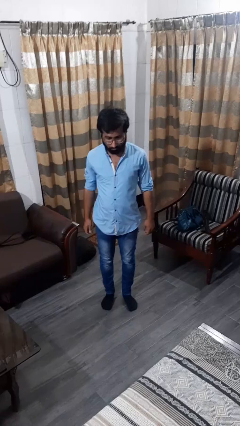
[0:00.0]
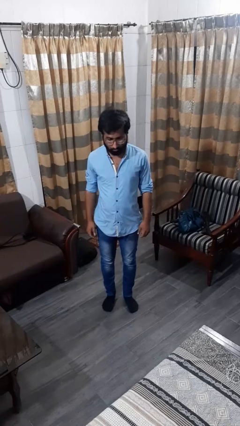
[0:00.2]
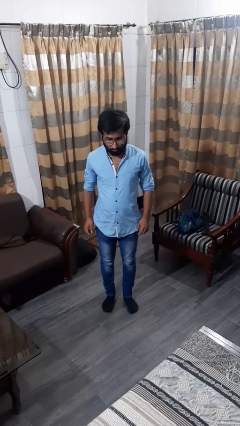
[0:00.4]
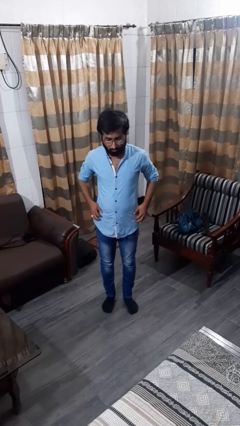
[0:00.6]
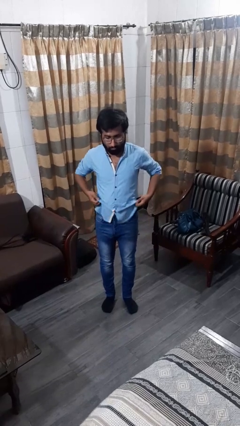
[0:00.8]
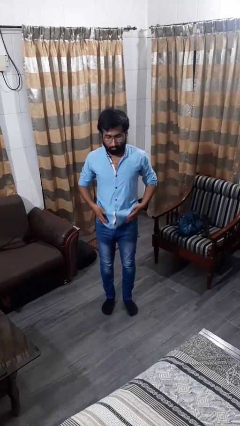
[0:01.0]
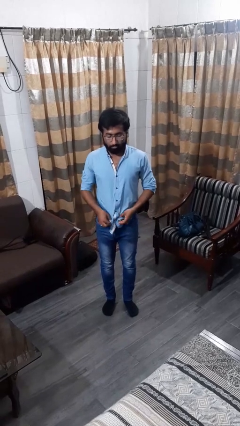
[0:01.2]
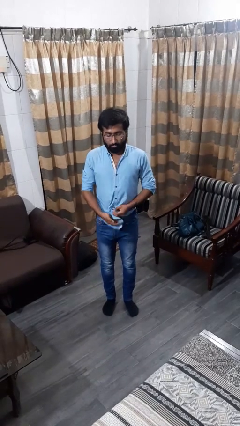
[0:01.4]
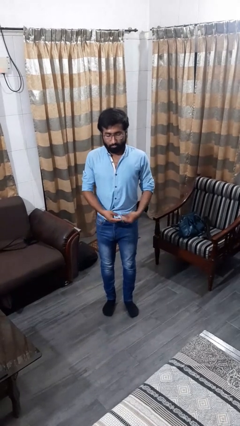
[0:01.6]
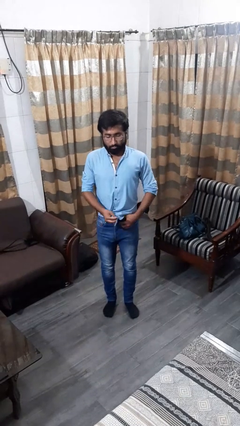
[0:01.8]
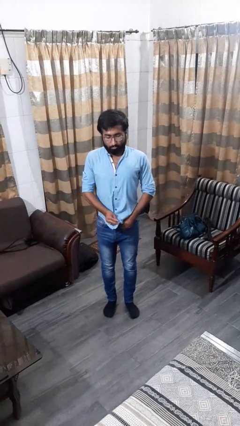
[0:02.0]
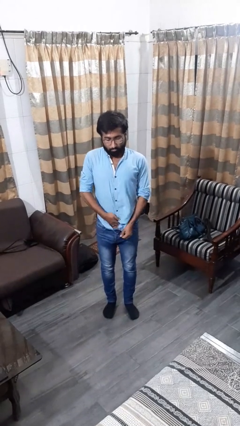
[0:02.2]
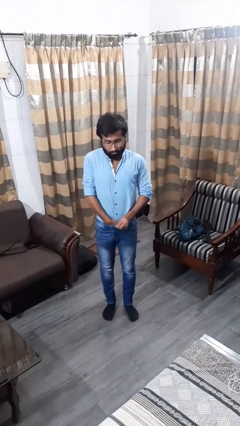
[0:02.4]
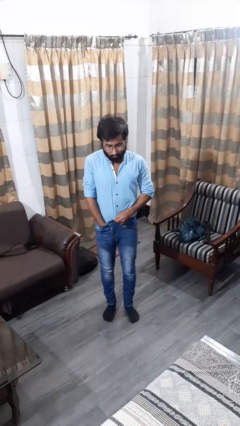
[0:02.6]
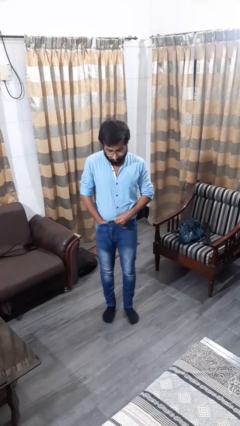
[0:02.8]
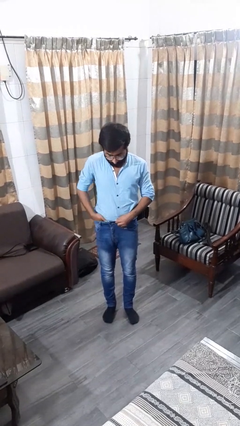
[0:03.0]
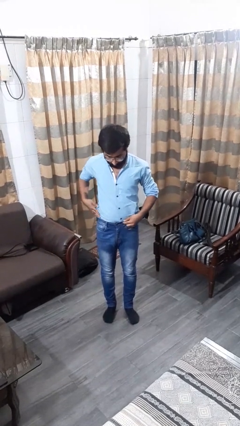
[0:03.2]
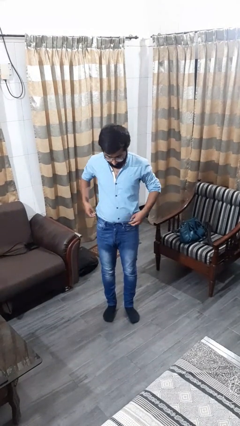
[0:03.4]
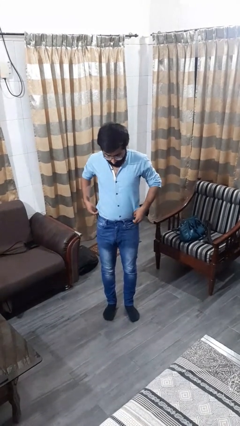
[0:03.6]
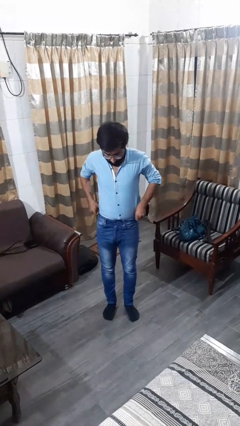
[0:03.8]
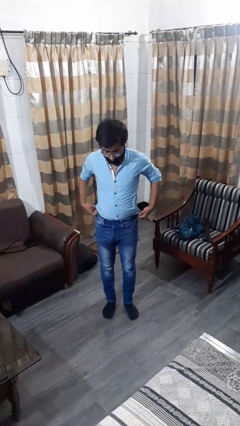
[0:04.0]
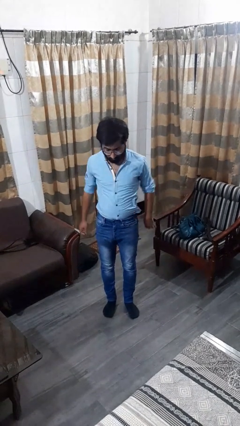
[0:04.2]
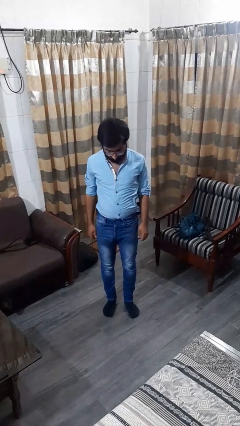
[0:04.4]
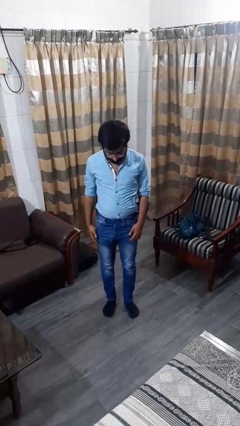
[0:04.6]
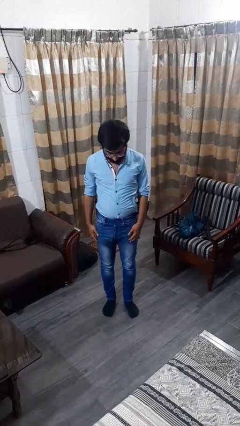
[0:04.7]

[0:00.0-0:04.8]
person tucks in shirt

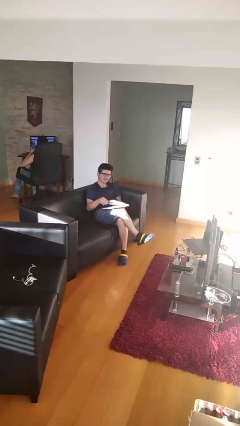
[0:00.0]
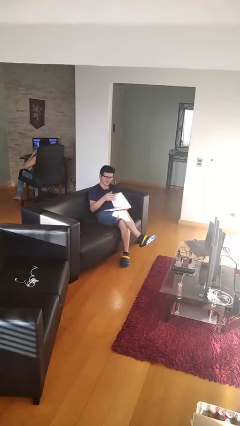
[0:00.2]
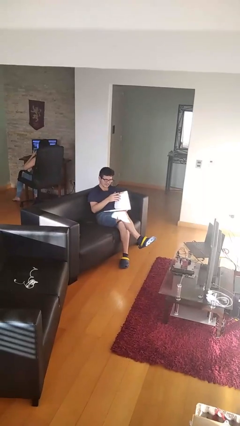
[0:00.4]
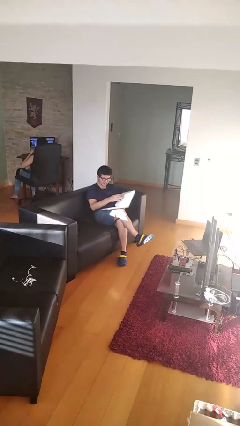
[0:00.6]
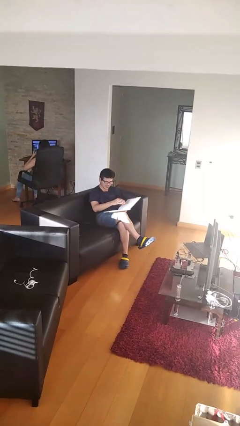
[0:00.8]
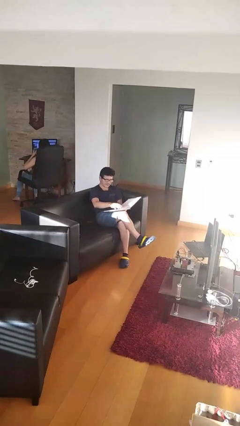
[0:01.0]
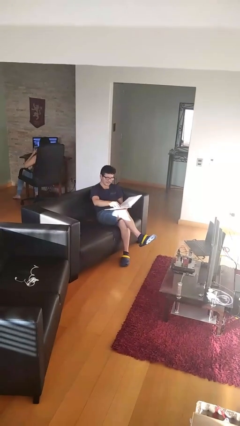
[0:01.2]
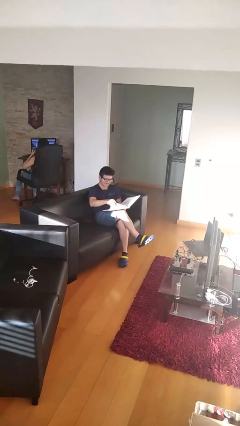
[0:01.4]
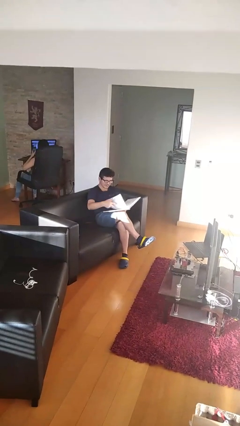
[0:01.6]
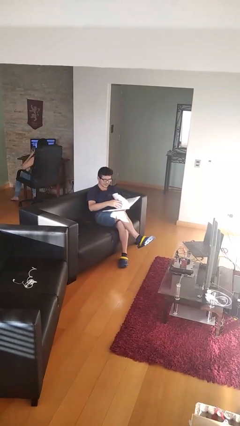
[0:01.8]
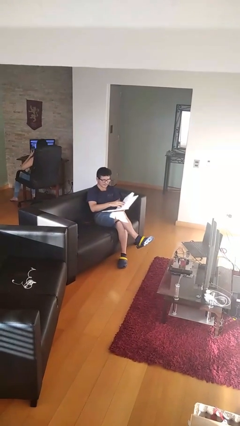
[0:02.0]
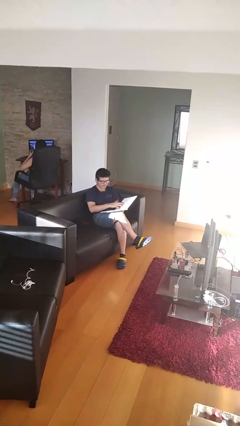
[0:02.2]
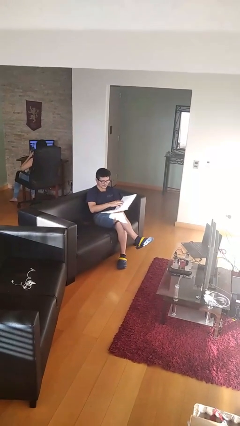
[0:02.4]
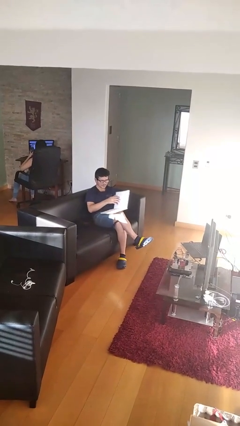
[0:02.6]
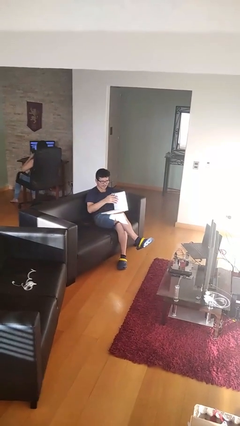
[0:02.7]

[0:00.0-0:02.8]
person reads document

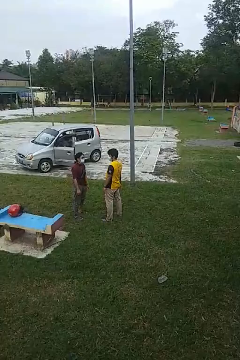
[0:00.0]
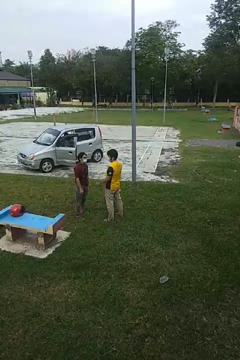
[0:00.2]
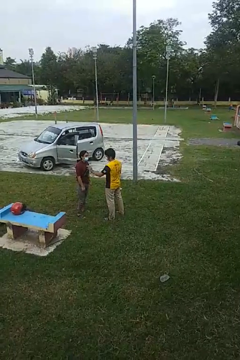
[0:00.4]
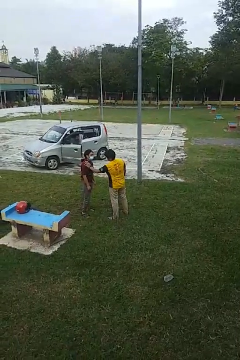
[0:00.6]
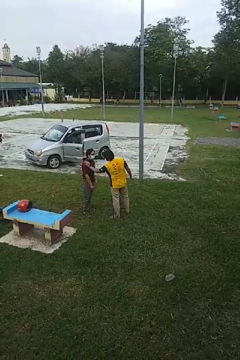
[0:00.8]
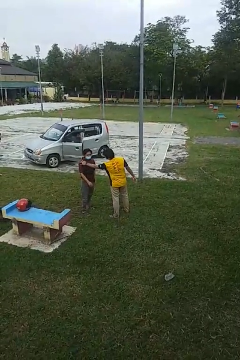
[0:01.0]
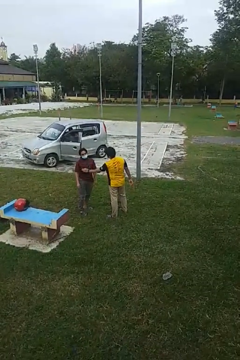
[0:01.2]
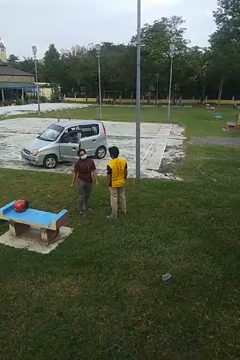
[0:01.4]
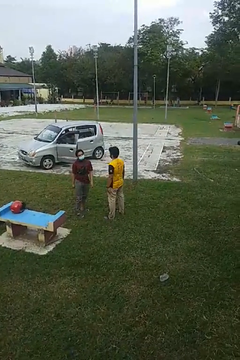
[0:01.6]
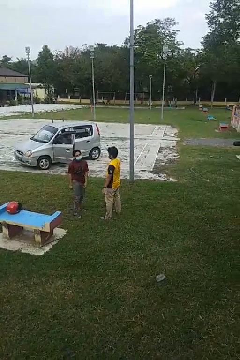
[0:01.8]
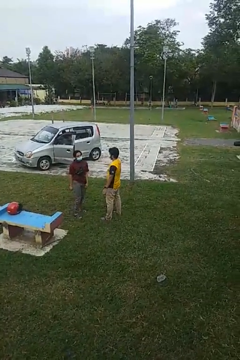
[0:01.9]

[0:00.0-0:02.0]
person shoves person

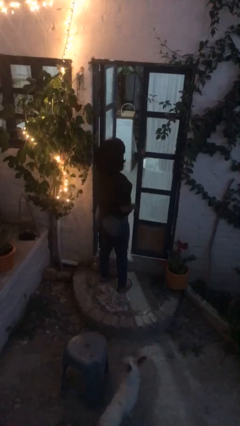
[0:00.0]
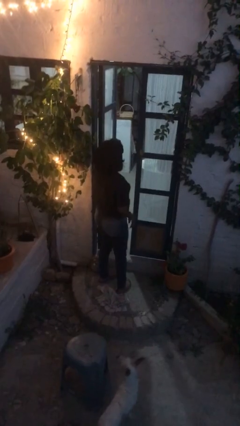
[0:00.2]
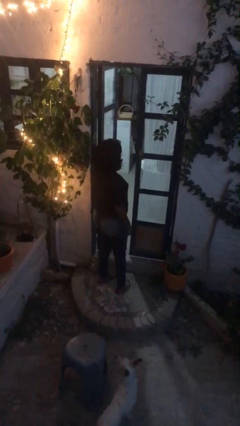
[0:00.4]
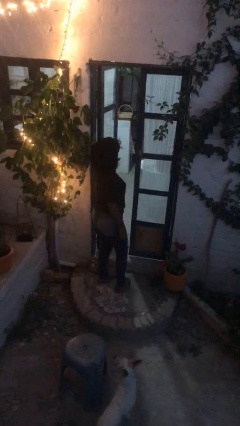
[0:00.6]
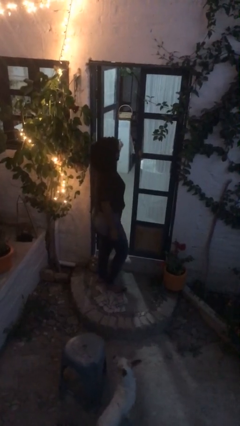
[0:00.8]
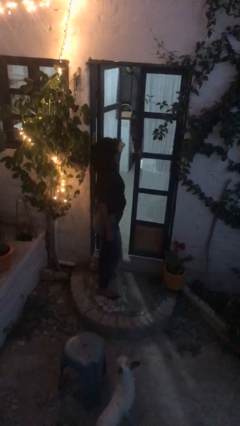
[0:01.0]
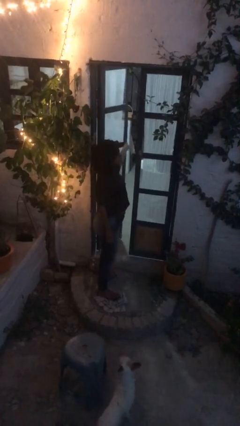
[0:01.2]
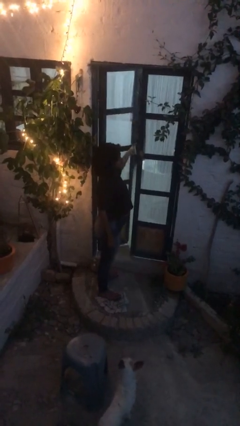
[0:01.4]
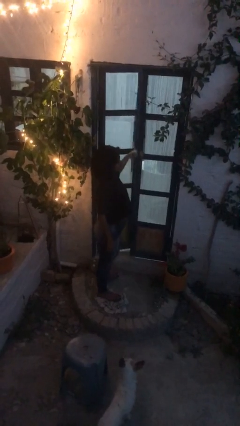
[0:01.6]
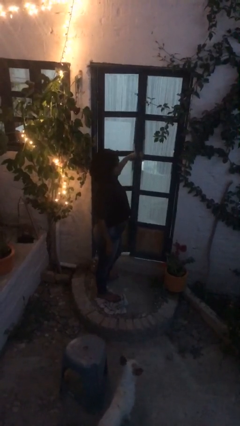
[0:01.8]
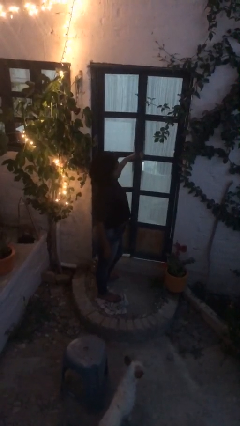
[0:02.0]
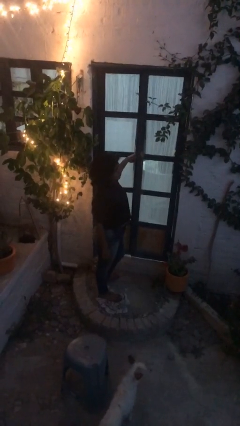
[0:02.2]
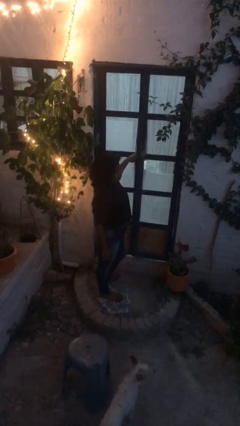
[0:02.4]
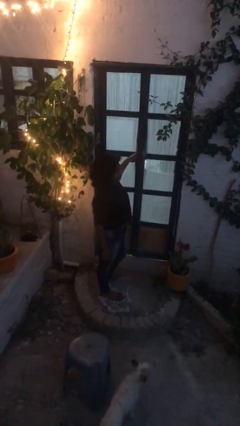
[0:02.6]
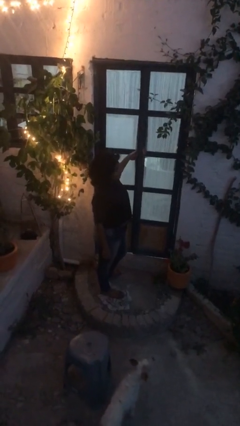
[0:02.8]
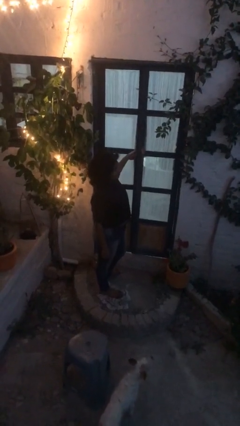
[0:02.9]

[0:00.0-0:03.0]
person closes facility door

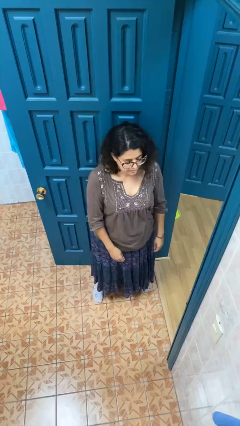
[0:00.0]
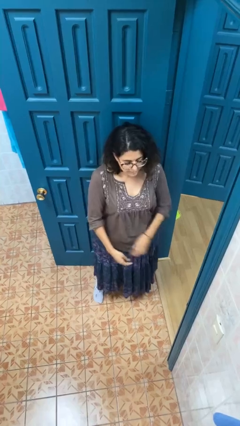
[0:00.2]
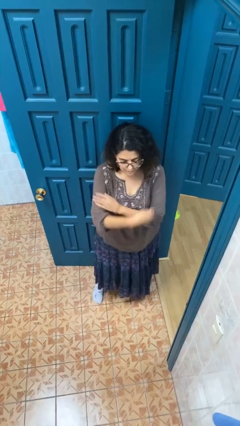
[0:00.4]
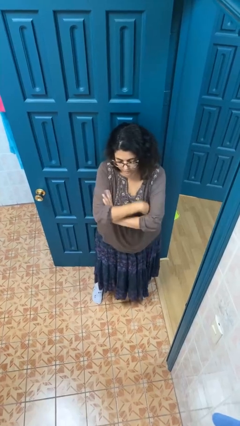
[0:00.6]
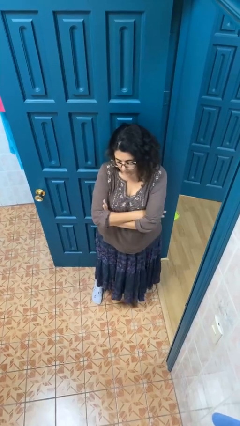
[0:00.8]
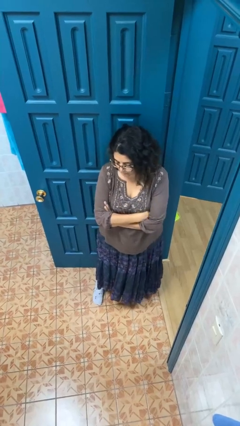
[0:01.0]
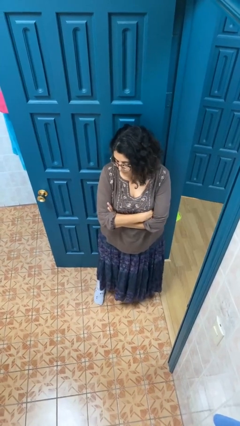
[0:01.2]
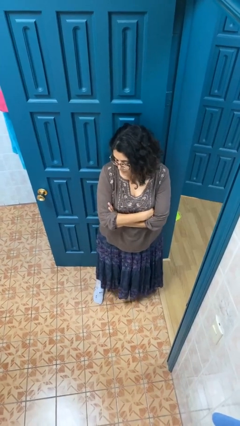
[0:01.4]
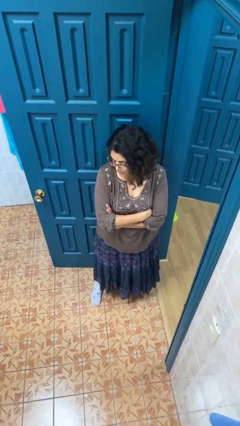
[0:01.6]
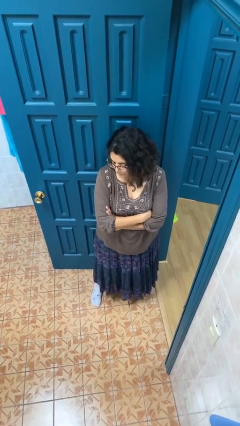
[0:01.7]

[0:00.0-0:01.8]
person crosses arms

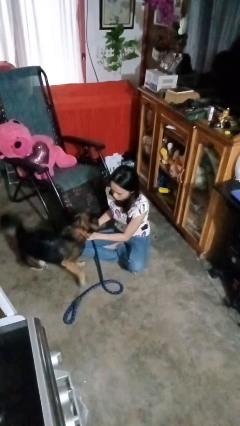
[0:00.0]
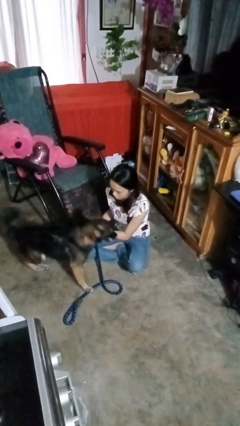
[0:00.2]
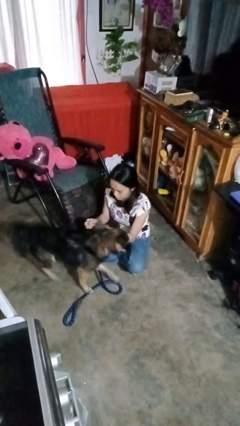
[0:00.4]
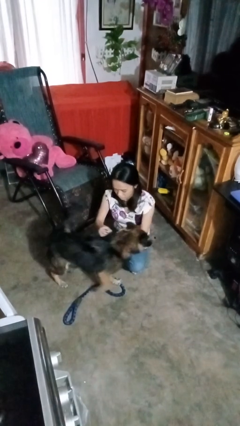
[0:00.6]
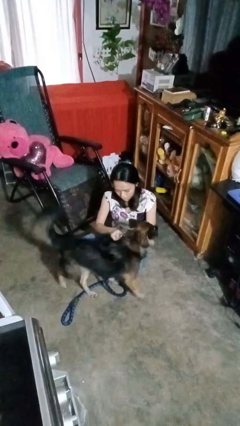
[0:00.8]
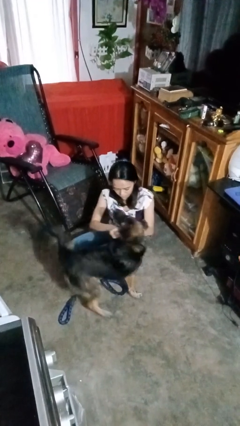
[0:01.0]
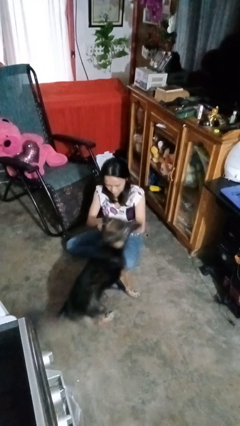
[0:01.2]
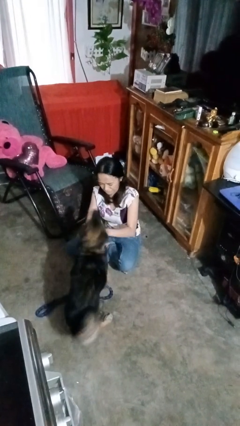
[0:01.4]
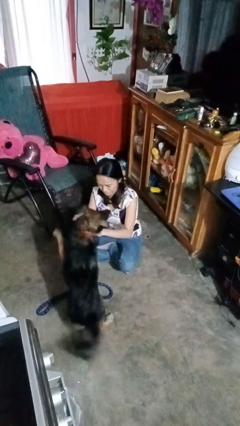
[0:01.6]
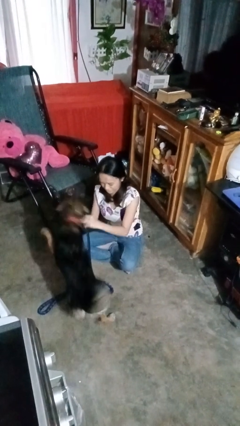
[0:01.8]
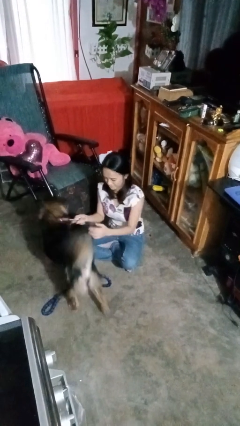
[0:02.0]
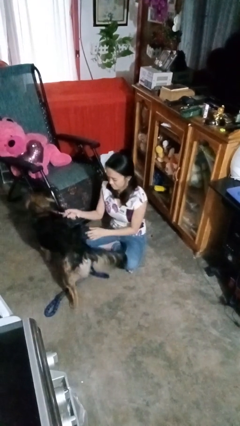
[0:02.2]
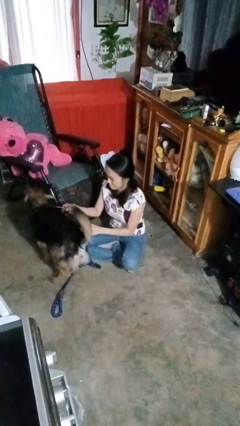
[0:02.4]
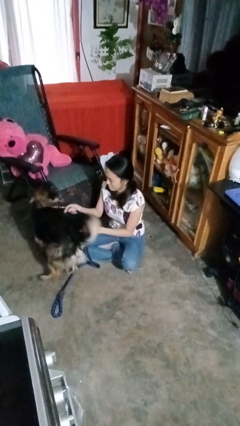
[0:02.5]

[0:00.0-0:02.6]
person attaches leash to dog

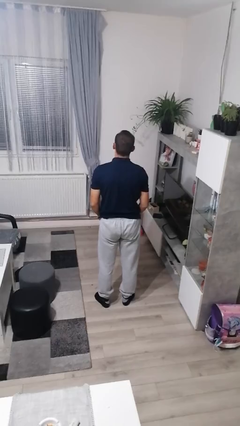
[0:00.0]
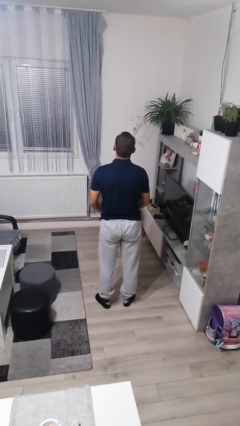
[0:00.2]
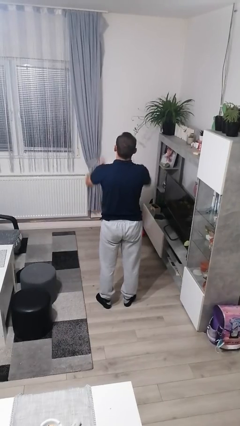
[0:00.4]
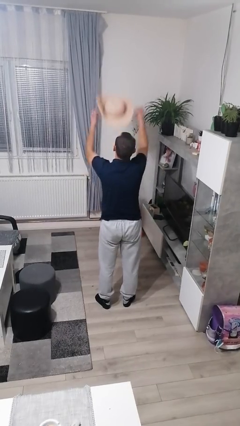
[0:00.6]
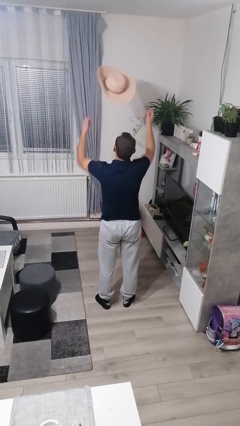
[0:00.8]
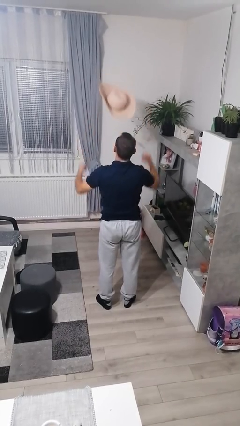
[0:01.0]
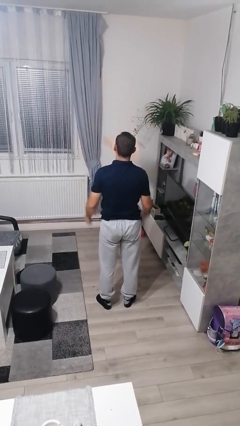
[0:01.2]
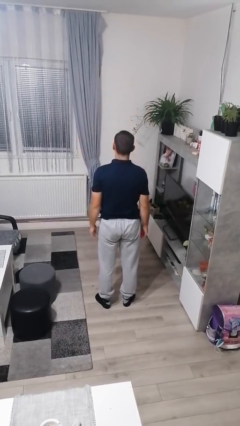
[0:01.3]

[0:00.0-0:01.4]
person throws object into air
